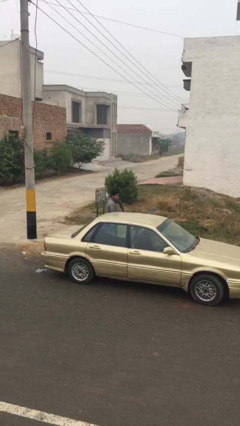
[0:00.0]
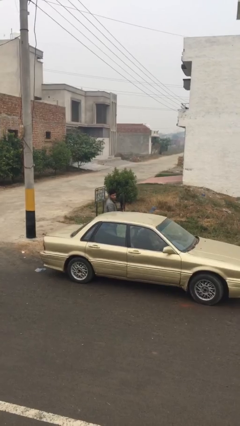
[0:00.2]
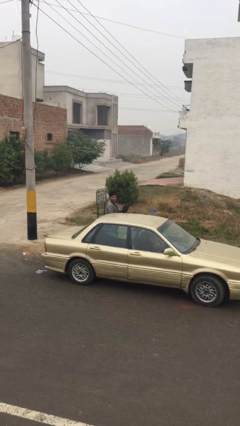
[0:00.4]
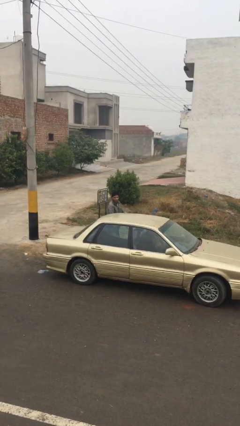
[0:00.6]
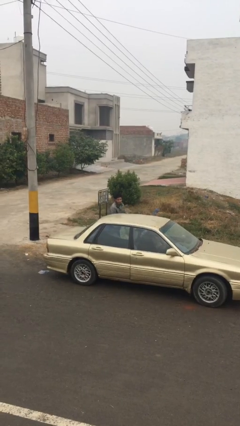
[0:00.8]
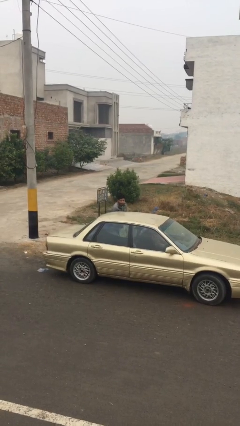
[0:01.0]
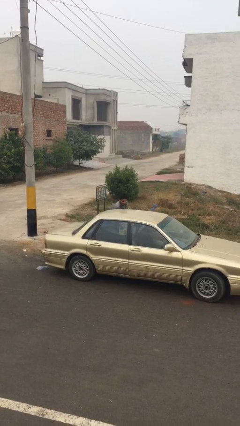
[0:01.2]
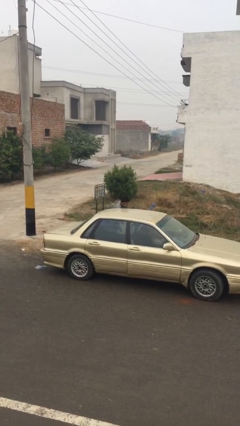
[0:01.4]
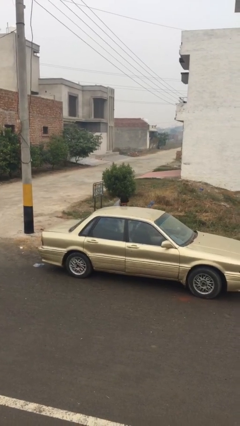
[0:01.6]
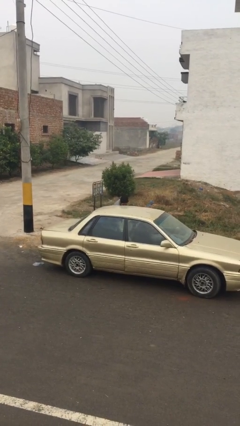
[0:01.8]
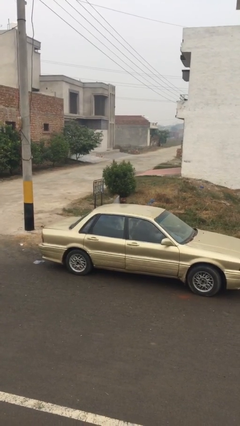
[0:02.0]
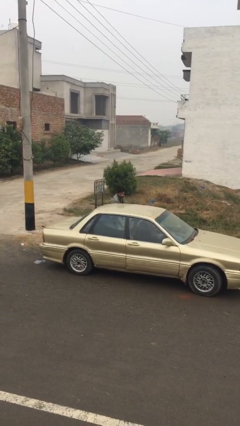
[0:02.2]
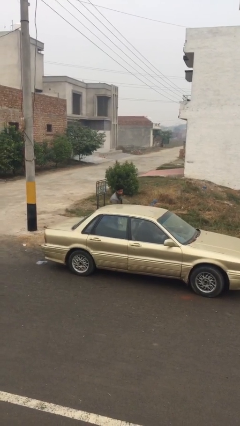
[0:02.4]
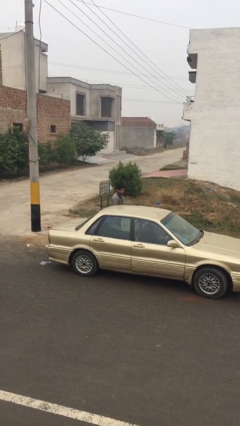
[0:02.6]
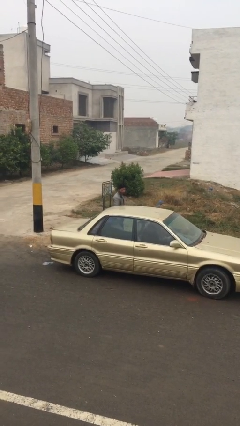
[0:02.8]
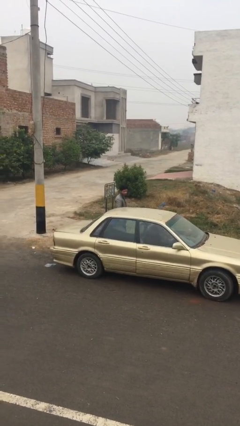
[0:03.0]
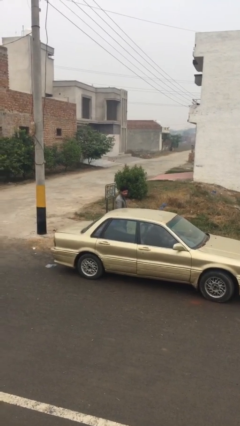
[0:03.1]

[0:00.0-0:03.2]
person loads car

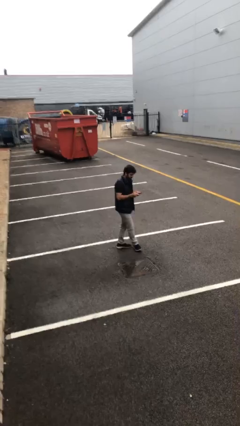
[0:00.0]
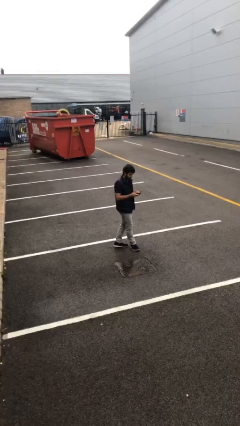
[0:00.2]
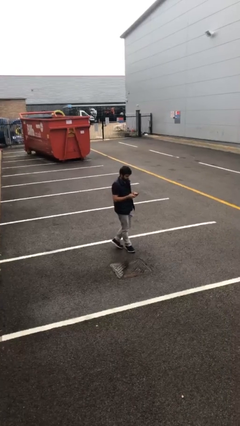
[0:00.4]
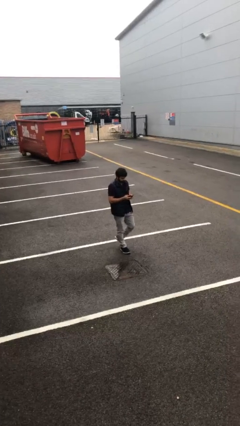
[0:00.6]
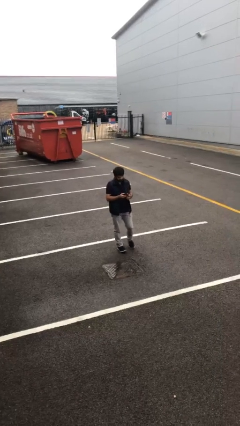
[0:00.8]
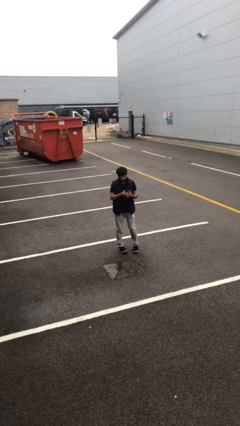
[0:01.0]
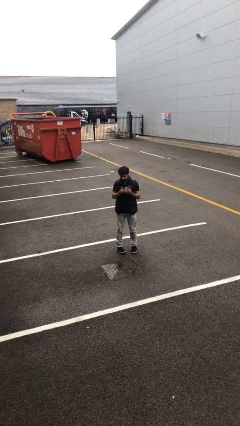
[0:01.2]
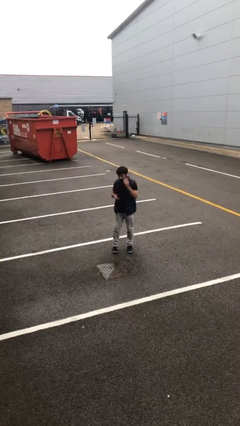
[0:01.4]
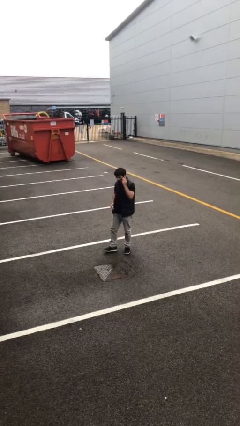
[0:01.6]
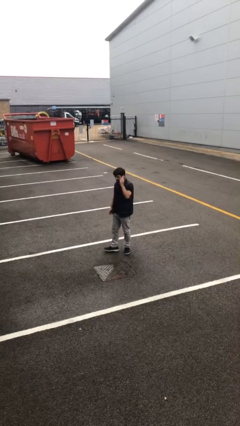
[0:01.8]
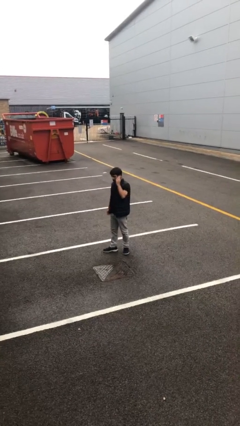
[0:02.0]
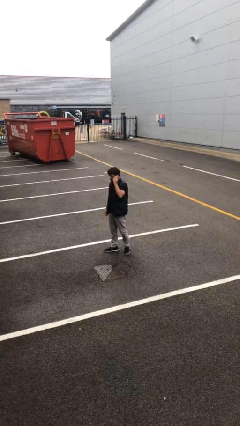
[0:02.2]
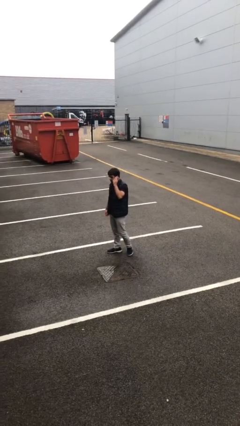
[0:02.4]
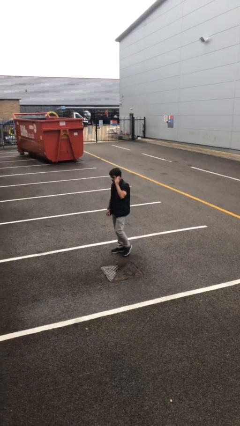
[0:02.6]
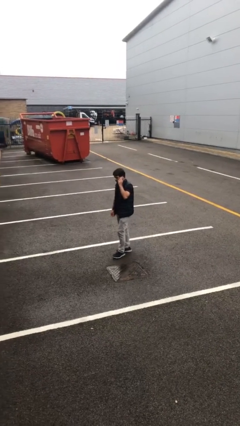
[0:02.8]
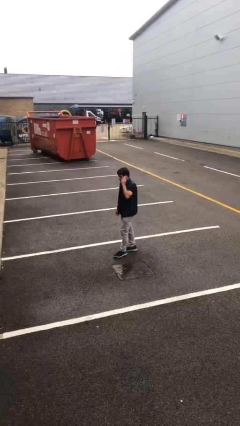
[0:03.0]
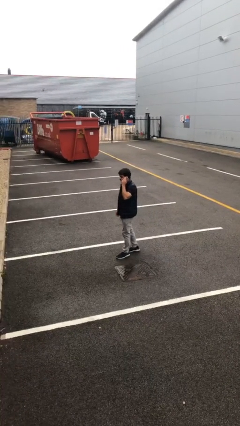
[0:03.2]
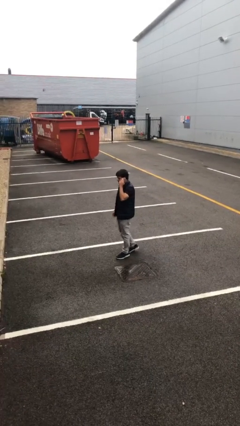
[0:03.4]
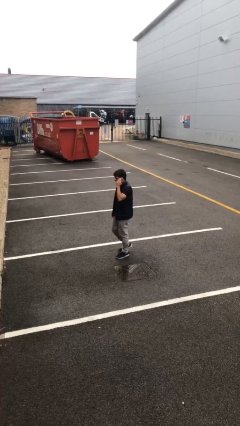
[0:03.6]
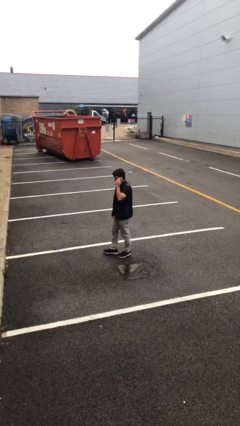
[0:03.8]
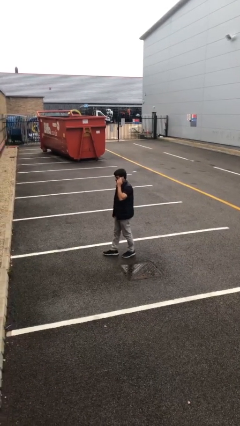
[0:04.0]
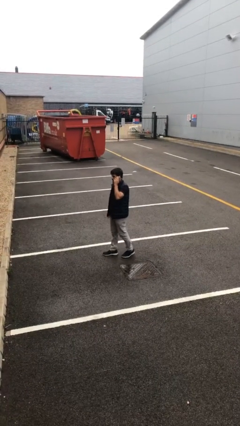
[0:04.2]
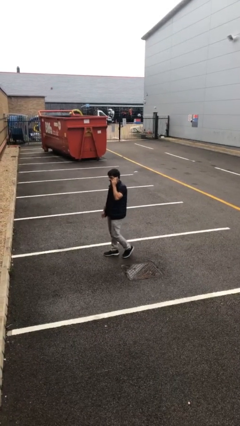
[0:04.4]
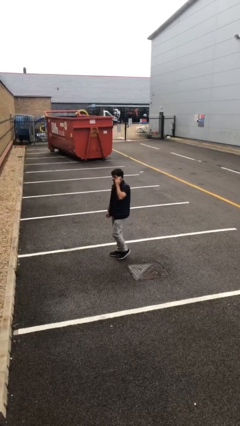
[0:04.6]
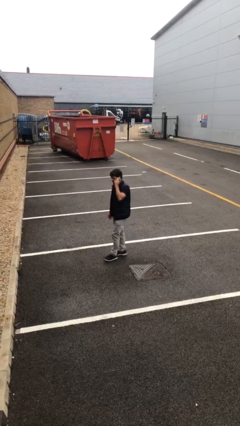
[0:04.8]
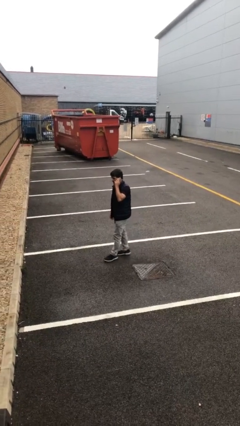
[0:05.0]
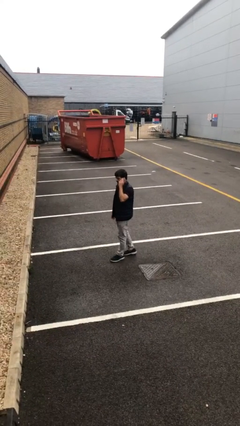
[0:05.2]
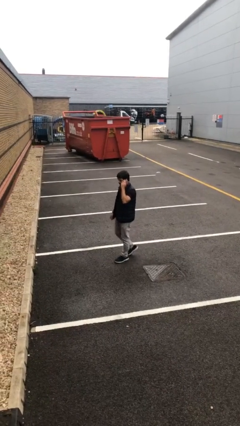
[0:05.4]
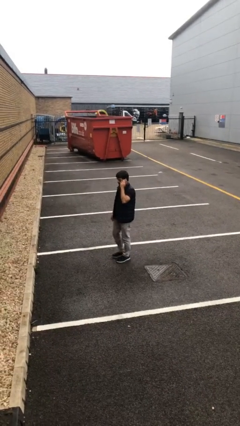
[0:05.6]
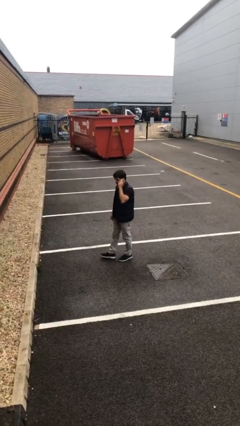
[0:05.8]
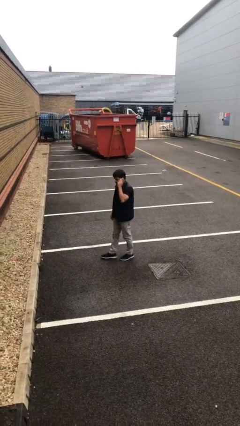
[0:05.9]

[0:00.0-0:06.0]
person talks on phone

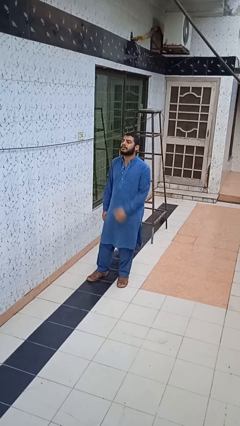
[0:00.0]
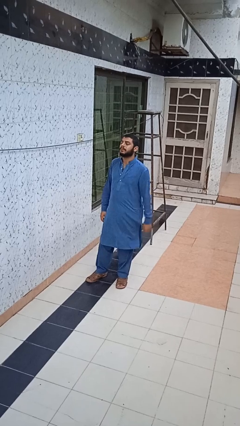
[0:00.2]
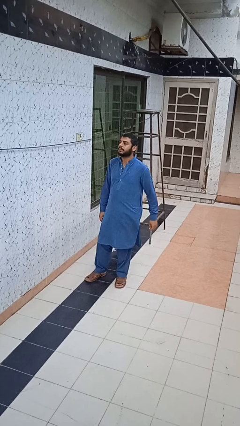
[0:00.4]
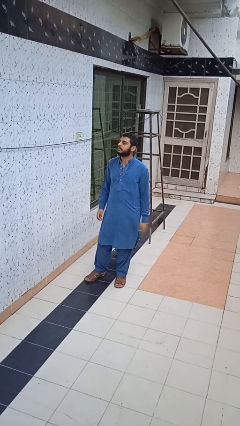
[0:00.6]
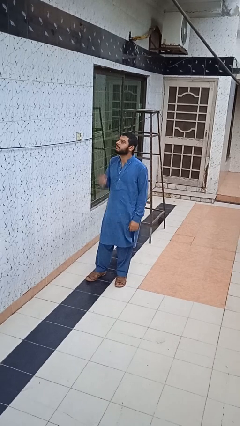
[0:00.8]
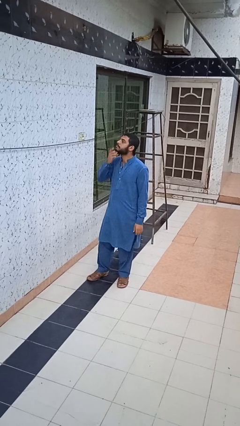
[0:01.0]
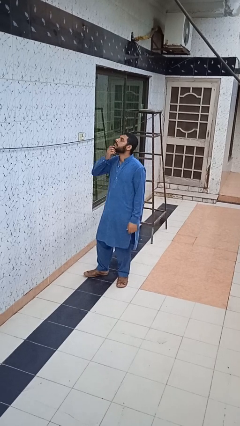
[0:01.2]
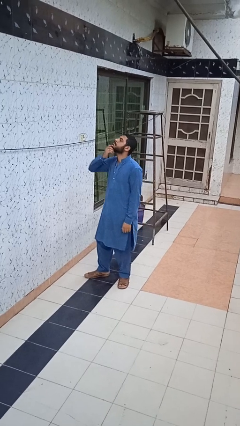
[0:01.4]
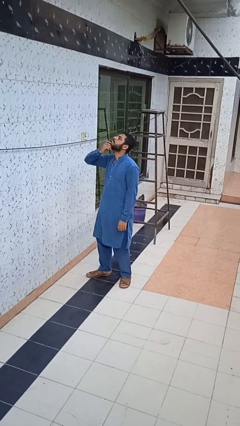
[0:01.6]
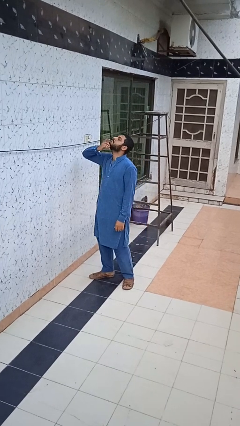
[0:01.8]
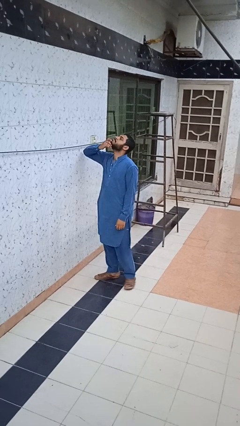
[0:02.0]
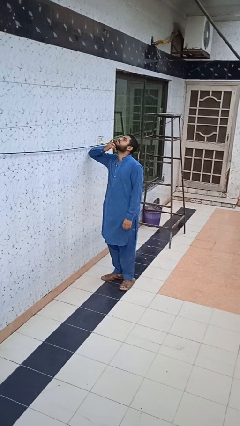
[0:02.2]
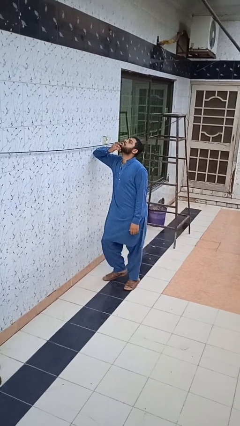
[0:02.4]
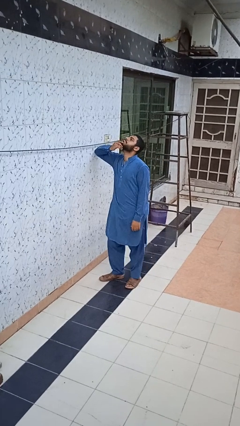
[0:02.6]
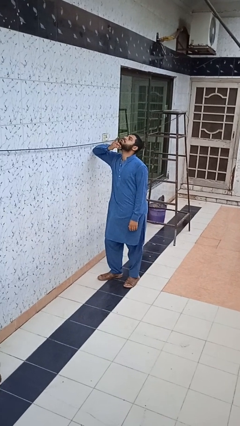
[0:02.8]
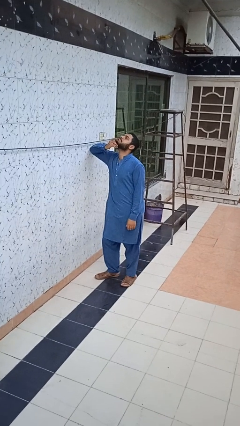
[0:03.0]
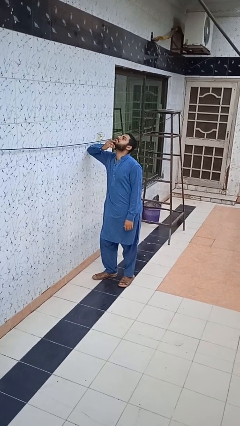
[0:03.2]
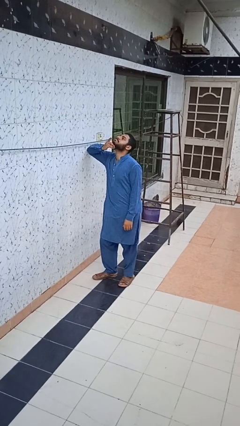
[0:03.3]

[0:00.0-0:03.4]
person strokes chin

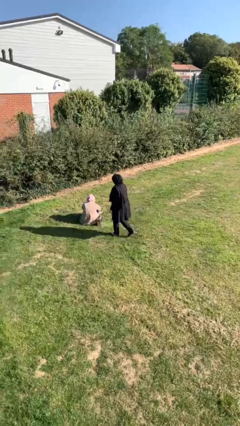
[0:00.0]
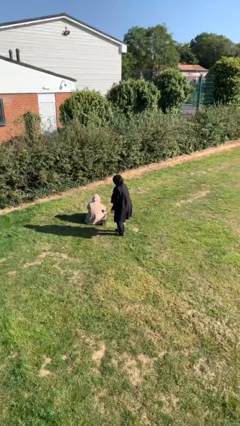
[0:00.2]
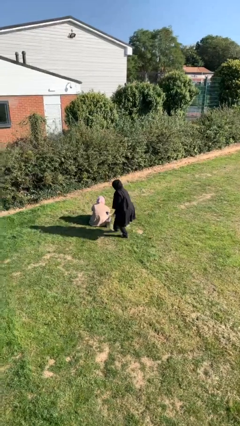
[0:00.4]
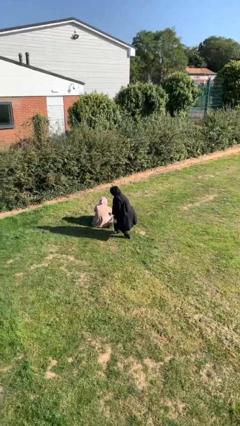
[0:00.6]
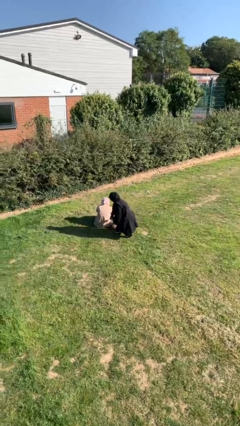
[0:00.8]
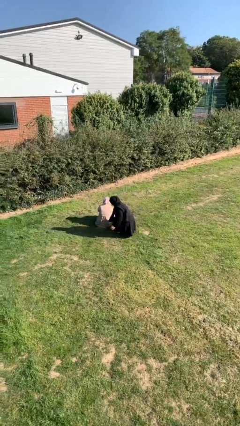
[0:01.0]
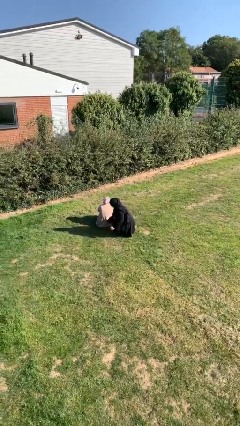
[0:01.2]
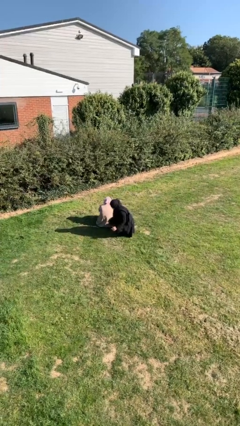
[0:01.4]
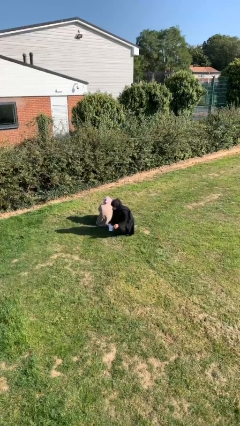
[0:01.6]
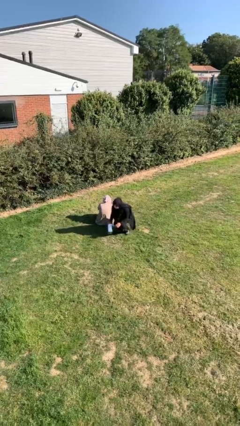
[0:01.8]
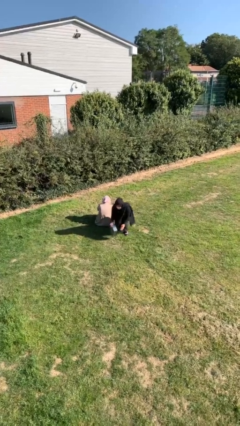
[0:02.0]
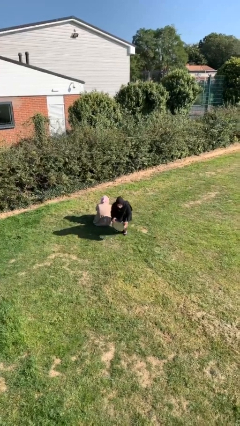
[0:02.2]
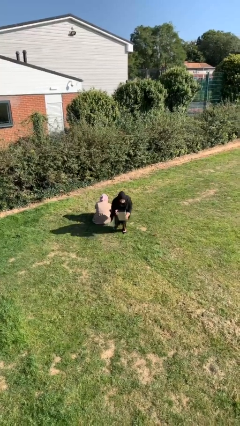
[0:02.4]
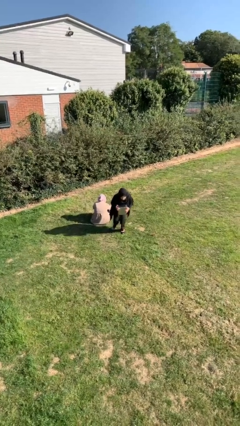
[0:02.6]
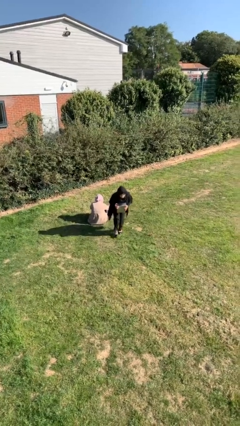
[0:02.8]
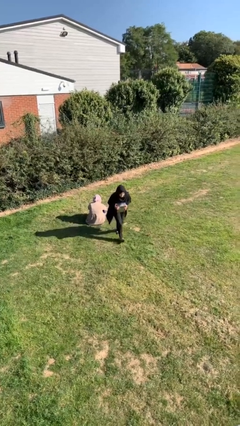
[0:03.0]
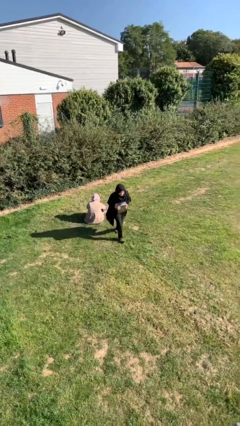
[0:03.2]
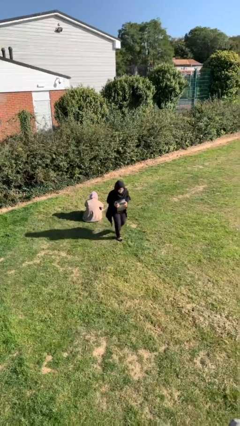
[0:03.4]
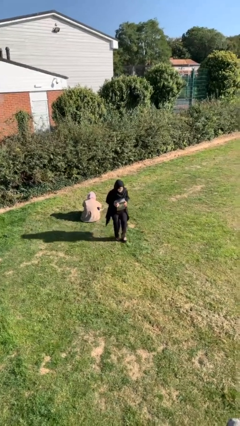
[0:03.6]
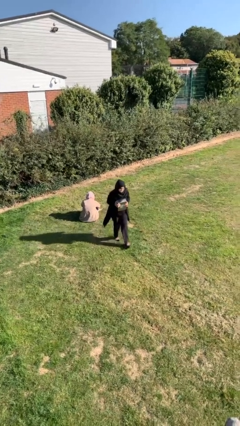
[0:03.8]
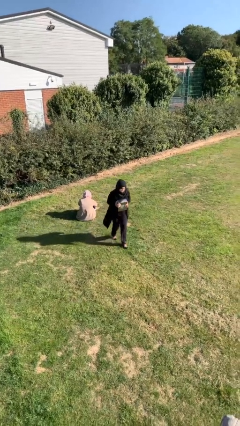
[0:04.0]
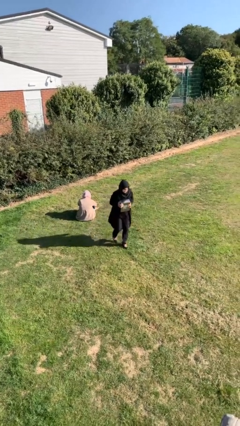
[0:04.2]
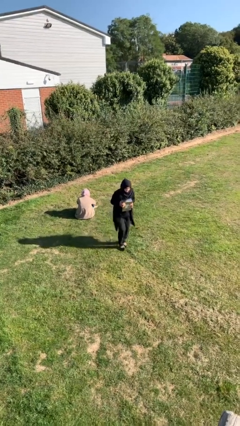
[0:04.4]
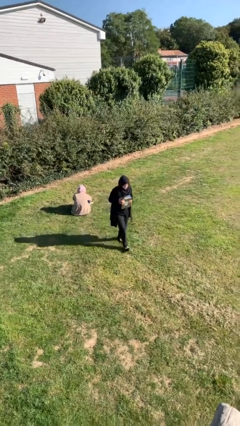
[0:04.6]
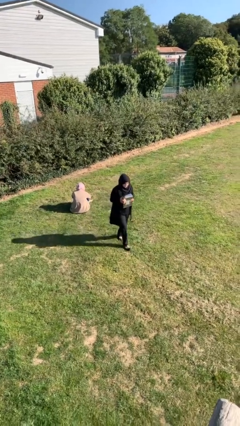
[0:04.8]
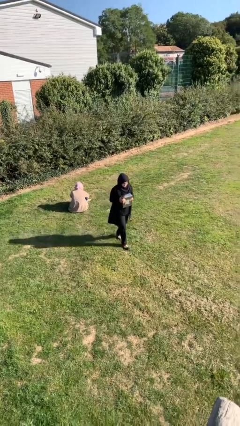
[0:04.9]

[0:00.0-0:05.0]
person steals object from person
